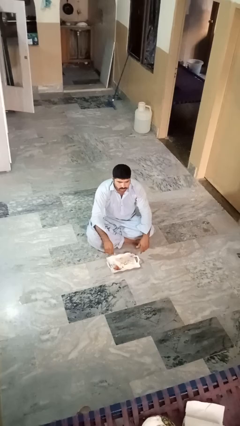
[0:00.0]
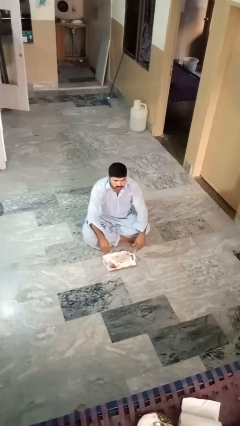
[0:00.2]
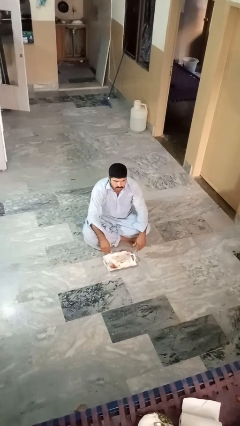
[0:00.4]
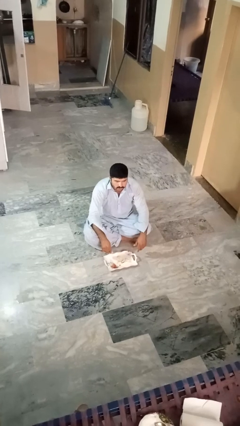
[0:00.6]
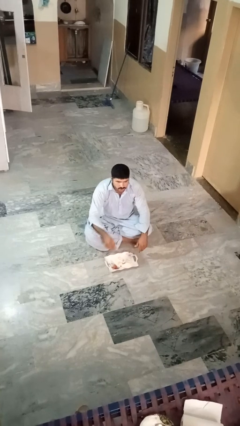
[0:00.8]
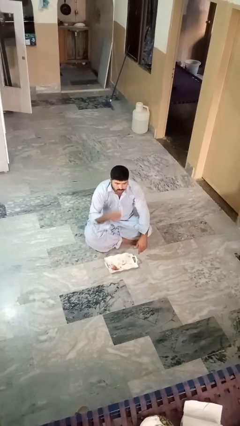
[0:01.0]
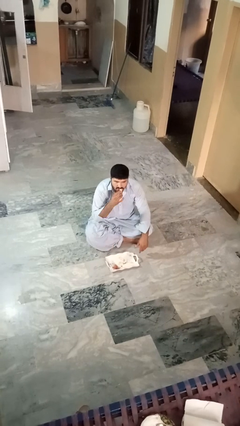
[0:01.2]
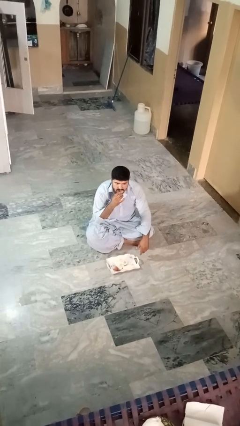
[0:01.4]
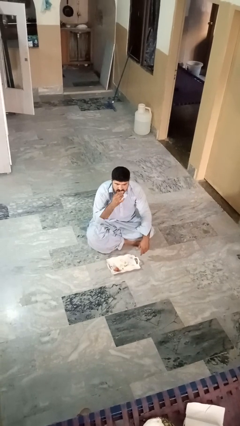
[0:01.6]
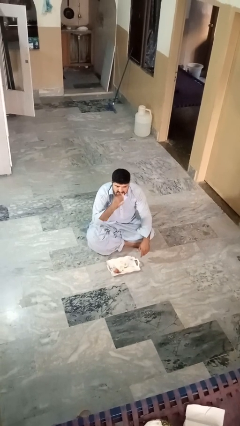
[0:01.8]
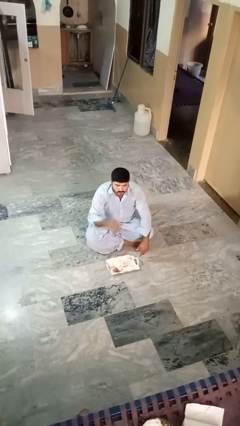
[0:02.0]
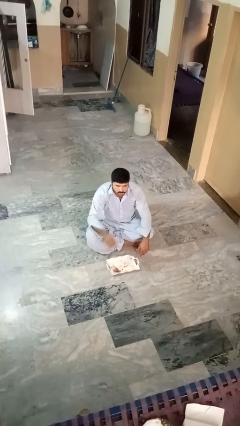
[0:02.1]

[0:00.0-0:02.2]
person eats apple

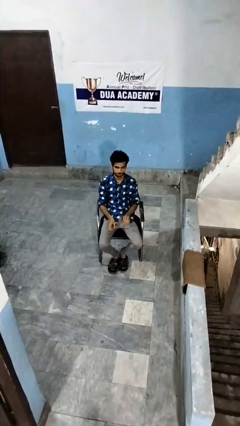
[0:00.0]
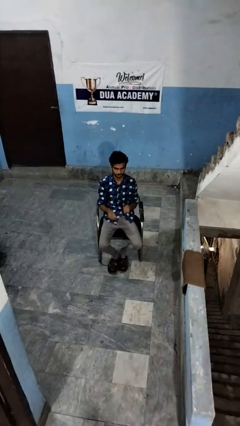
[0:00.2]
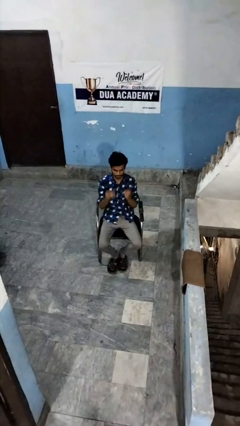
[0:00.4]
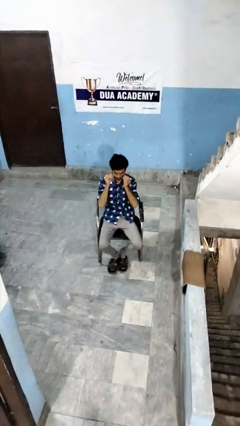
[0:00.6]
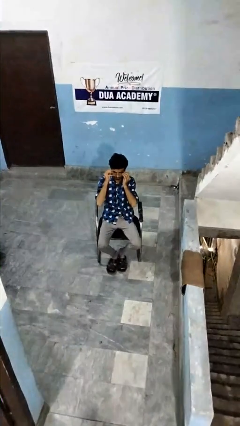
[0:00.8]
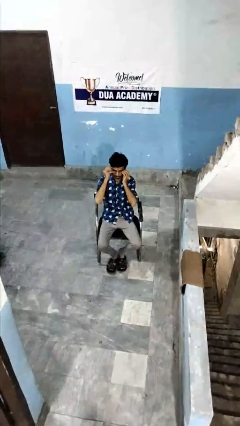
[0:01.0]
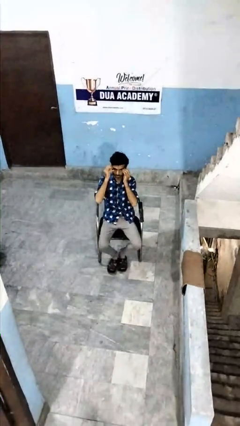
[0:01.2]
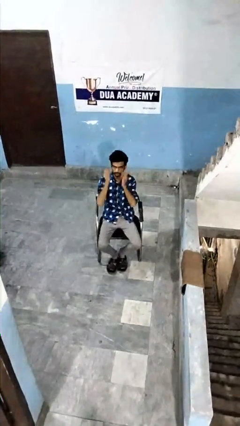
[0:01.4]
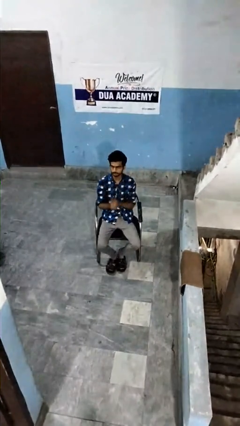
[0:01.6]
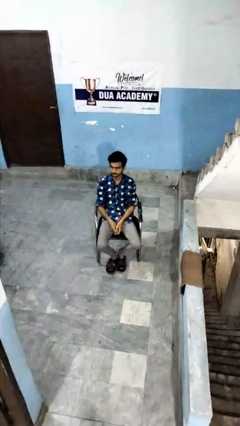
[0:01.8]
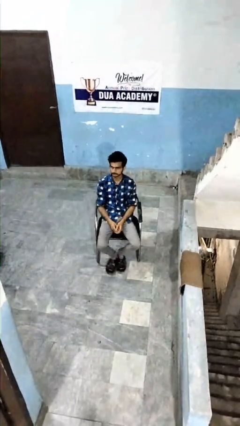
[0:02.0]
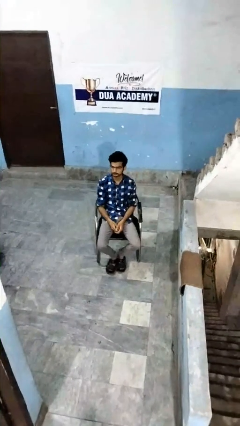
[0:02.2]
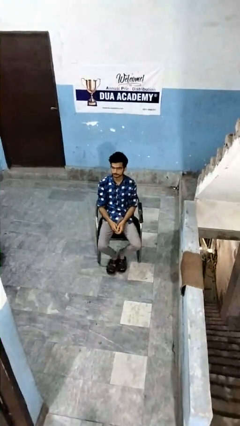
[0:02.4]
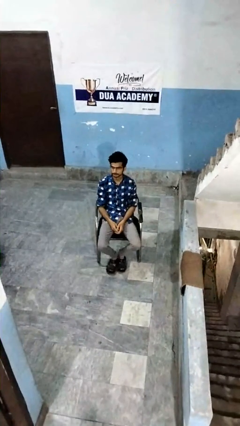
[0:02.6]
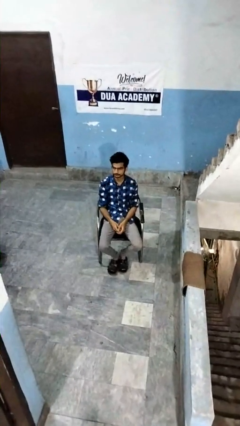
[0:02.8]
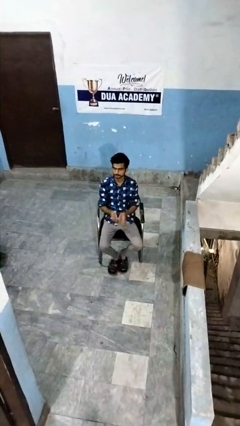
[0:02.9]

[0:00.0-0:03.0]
person puts on glasses

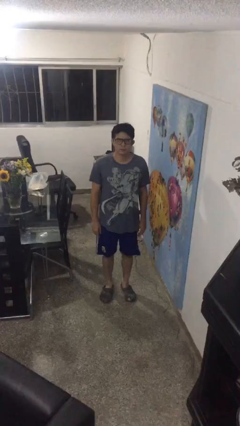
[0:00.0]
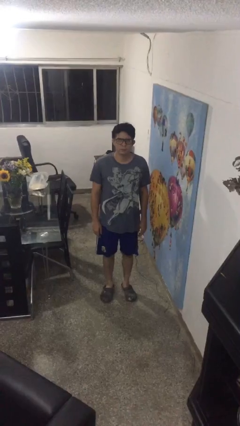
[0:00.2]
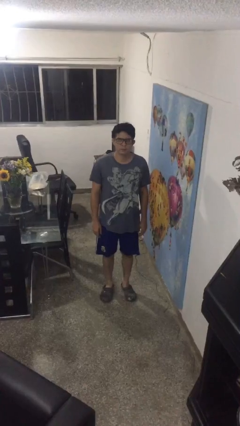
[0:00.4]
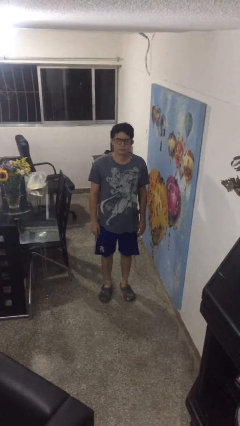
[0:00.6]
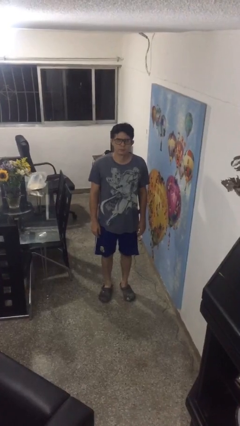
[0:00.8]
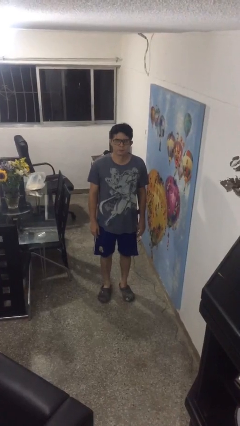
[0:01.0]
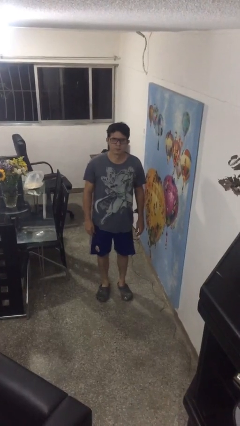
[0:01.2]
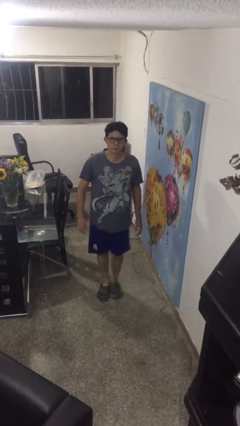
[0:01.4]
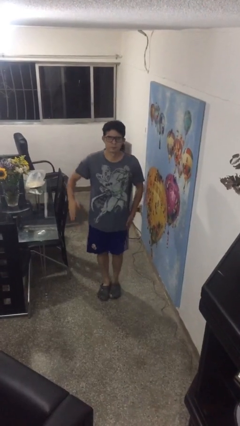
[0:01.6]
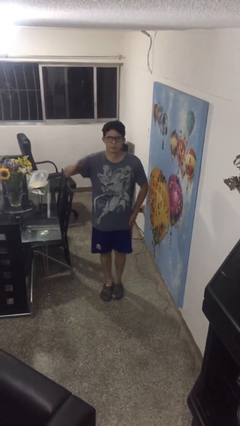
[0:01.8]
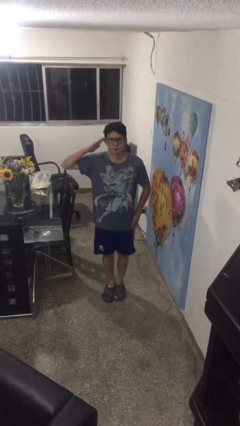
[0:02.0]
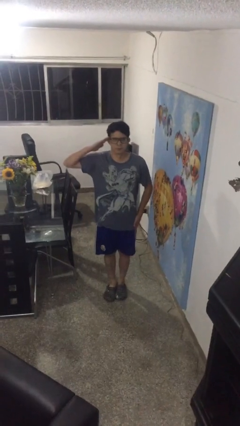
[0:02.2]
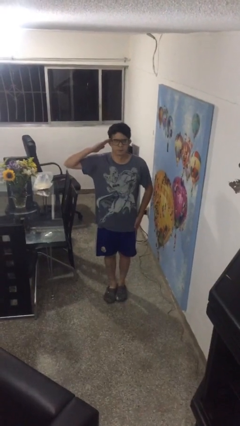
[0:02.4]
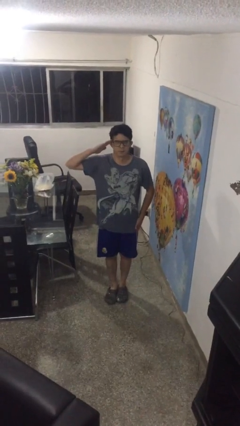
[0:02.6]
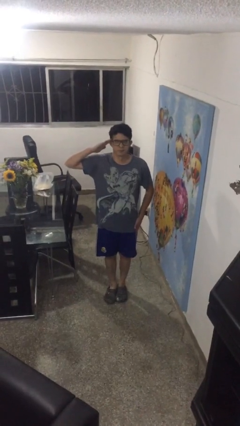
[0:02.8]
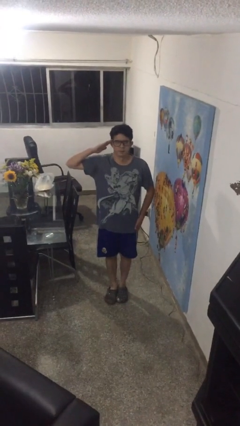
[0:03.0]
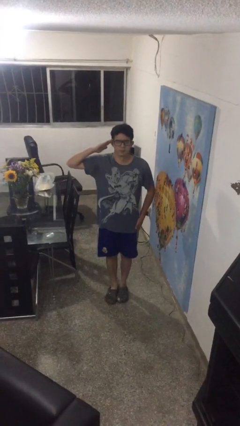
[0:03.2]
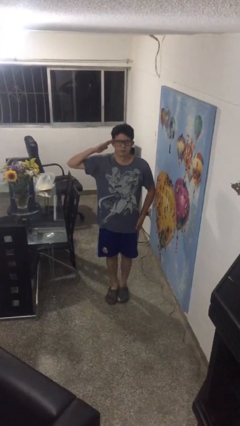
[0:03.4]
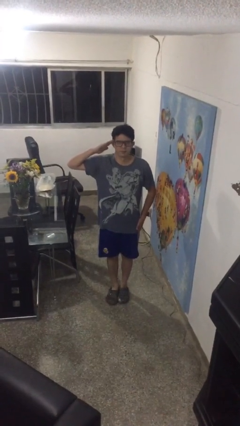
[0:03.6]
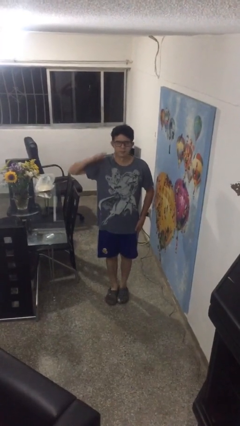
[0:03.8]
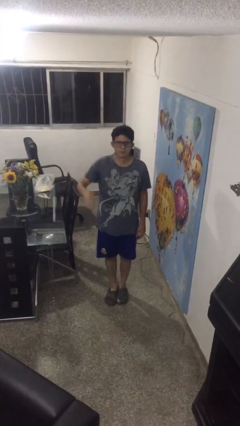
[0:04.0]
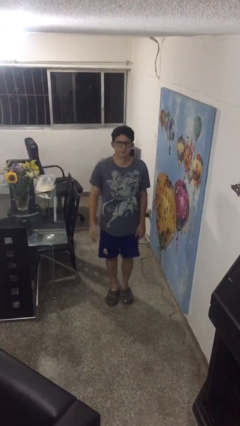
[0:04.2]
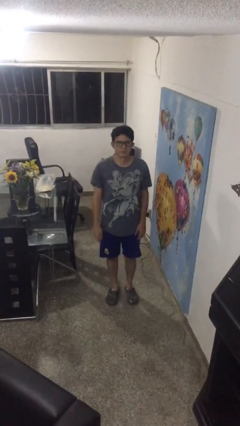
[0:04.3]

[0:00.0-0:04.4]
person salutes

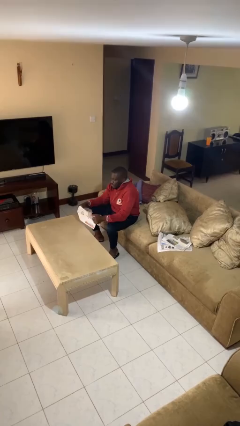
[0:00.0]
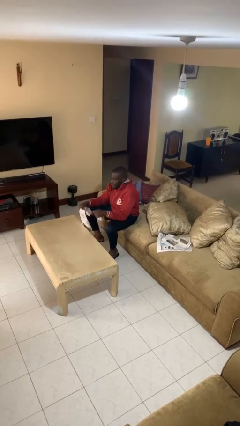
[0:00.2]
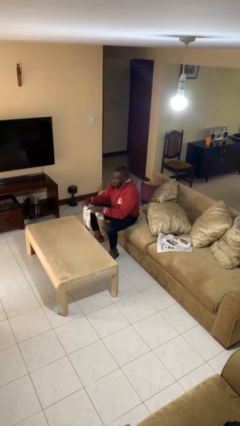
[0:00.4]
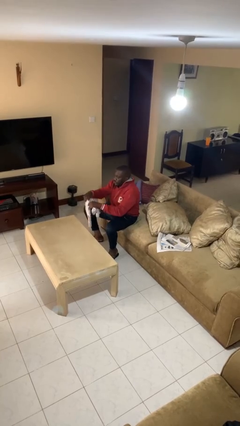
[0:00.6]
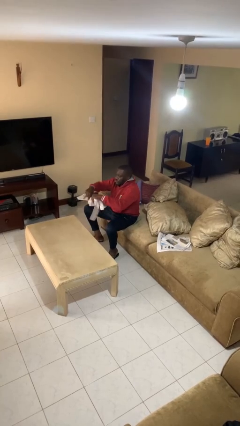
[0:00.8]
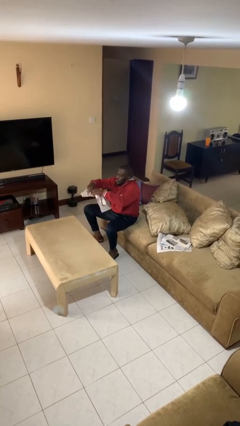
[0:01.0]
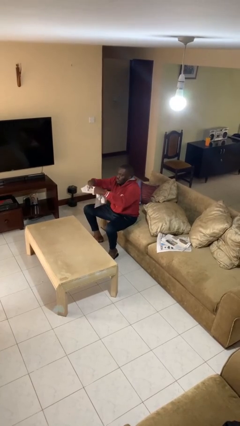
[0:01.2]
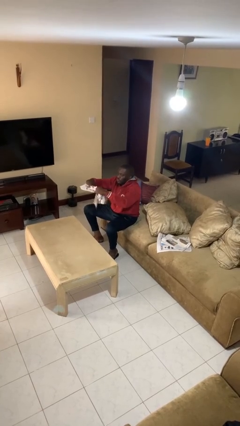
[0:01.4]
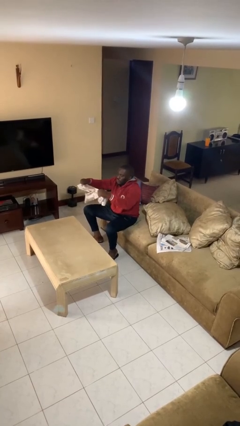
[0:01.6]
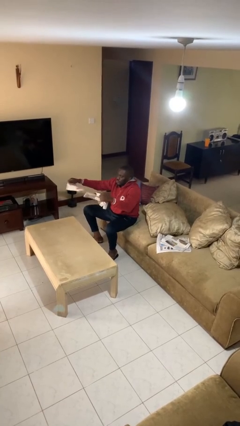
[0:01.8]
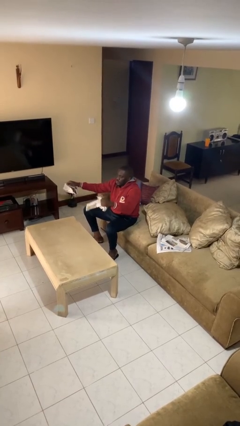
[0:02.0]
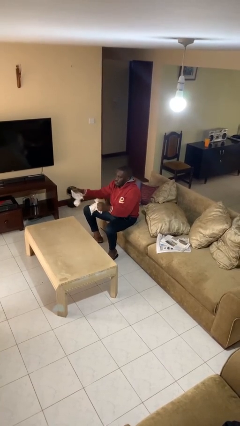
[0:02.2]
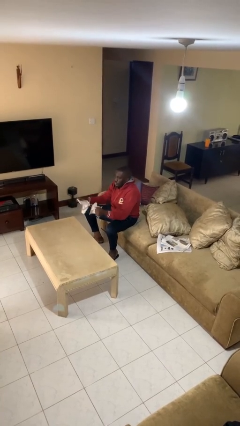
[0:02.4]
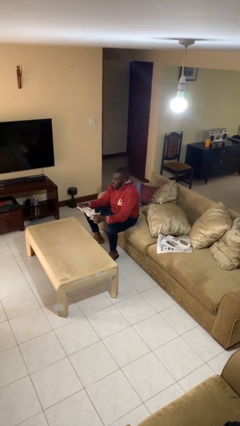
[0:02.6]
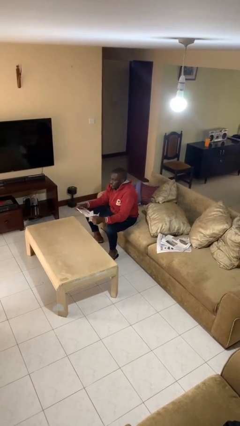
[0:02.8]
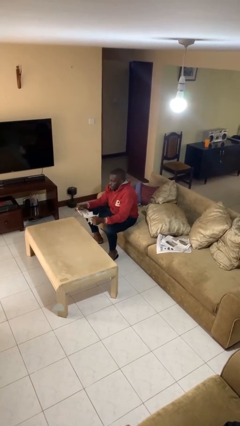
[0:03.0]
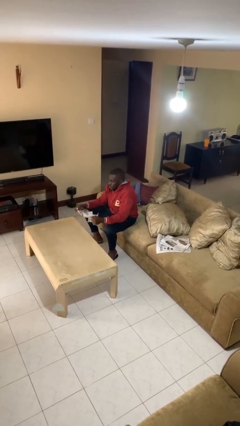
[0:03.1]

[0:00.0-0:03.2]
person tears paper

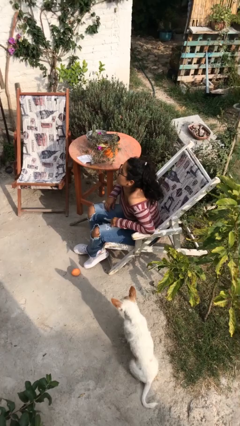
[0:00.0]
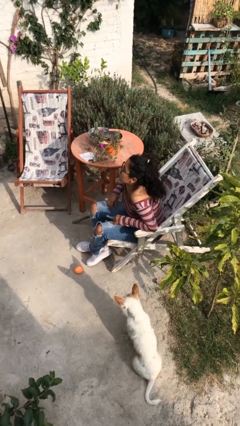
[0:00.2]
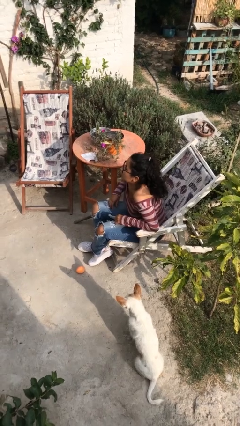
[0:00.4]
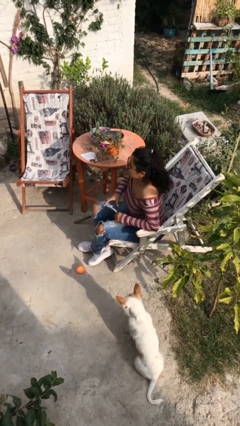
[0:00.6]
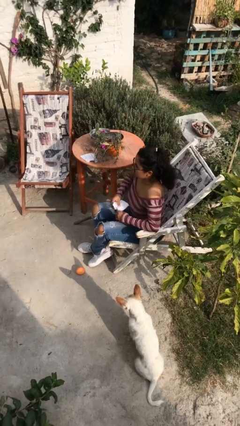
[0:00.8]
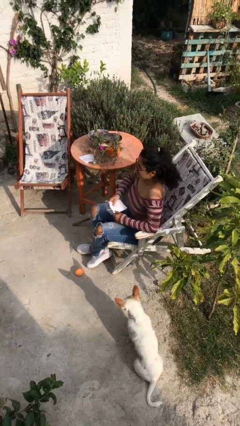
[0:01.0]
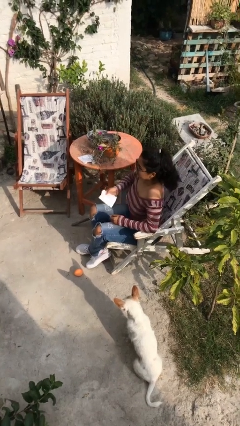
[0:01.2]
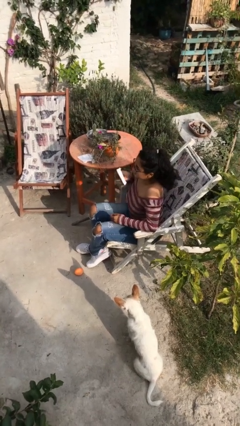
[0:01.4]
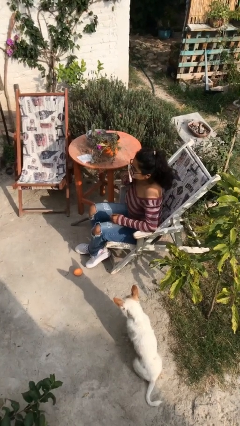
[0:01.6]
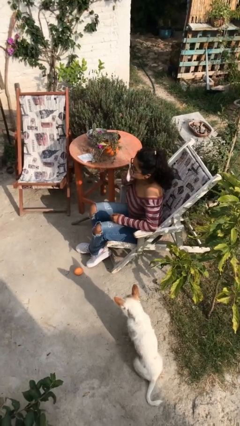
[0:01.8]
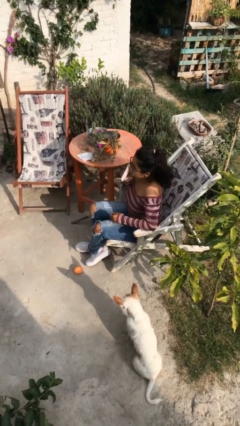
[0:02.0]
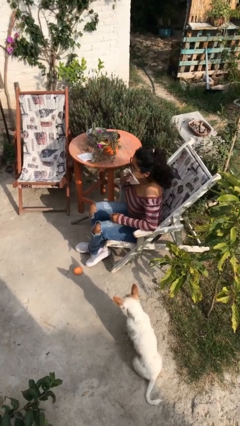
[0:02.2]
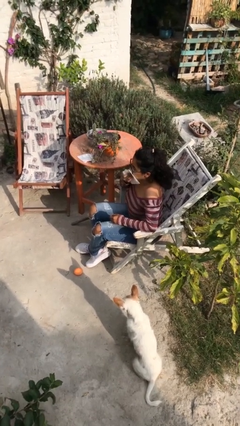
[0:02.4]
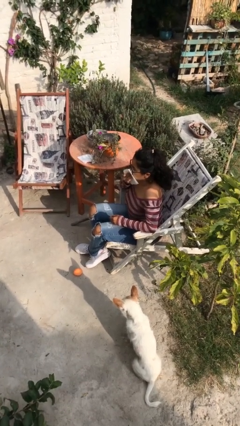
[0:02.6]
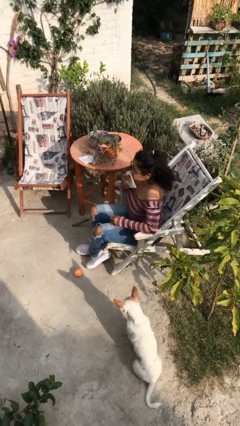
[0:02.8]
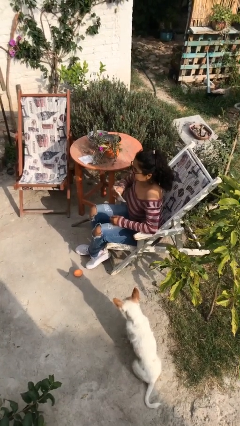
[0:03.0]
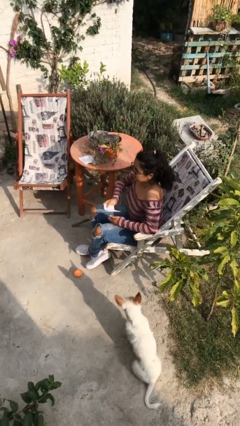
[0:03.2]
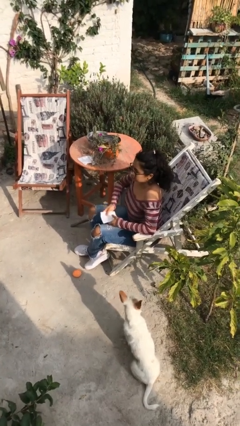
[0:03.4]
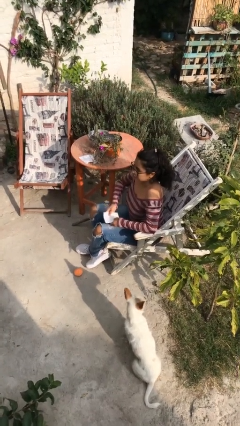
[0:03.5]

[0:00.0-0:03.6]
person wipes mouth with napkin

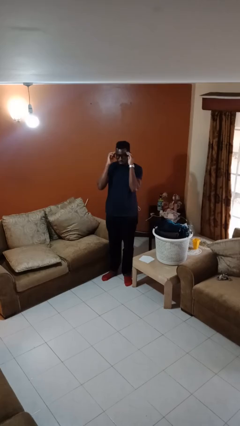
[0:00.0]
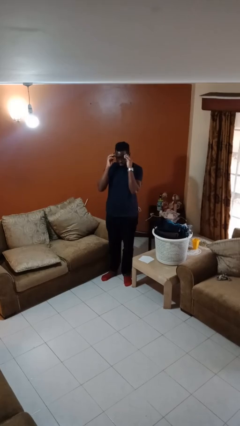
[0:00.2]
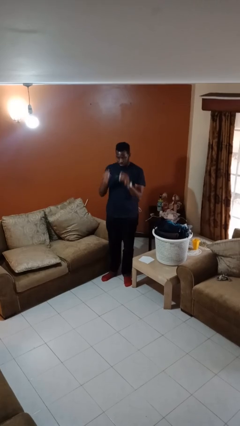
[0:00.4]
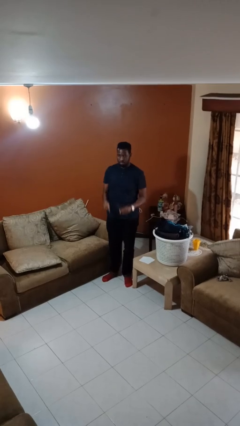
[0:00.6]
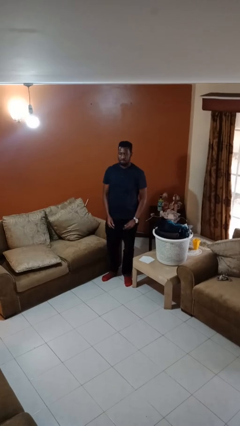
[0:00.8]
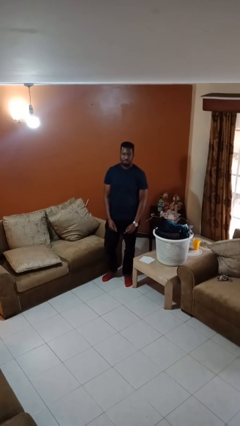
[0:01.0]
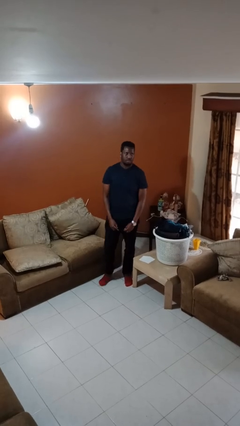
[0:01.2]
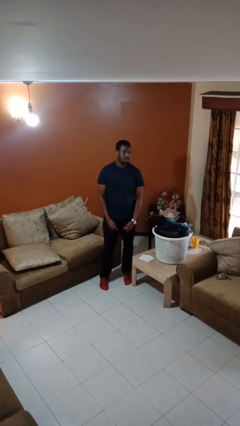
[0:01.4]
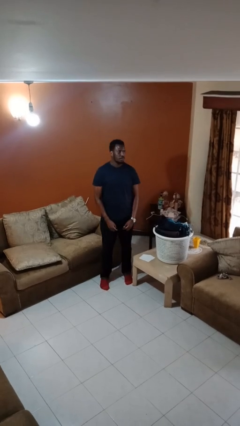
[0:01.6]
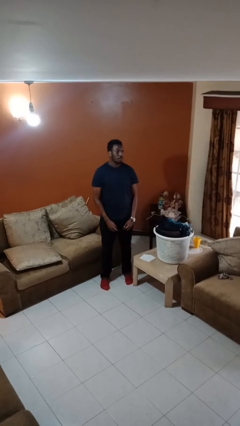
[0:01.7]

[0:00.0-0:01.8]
person takes off glasses
